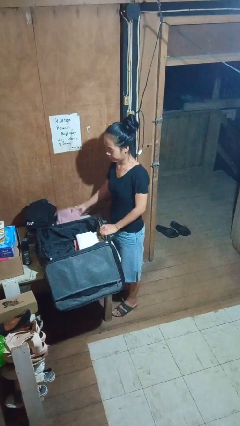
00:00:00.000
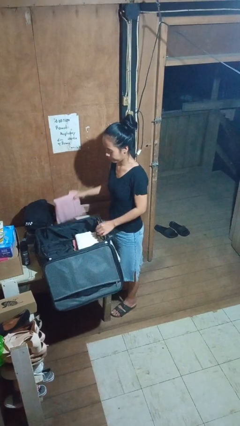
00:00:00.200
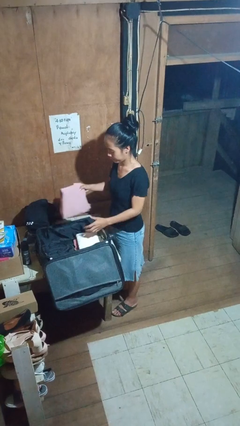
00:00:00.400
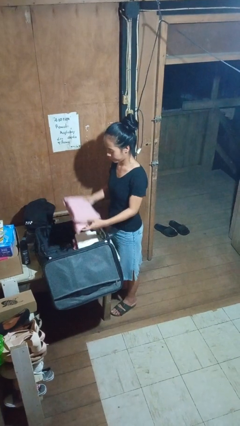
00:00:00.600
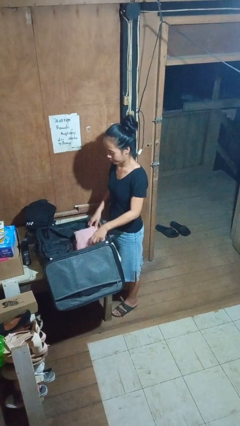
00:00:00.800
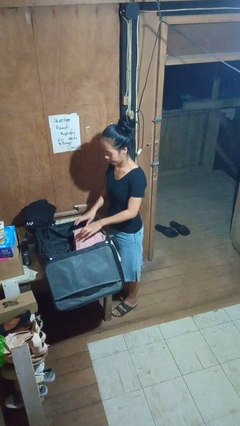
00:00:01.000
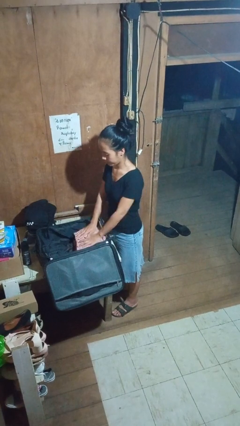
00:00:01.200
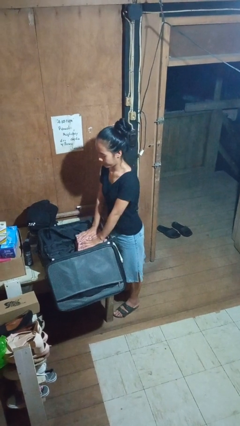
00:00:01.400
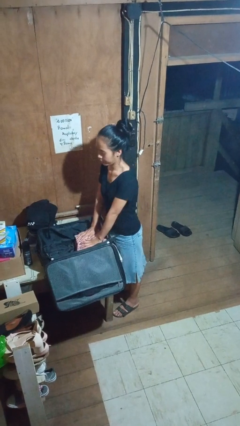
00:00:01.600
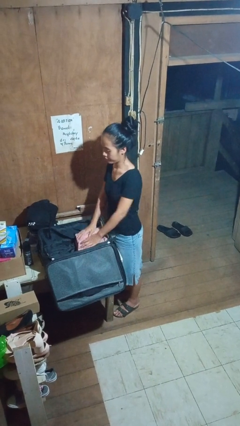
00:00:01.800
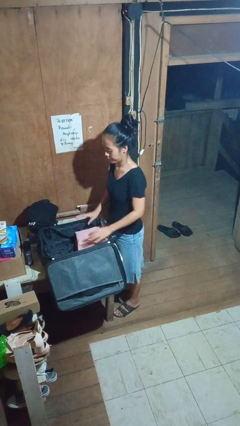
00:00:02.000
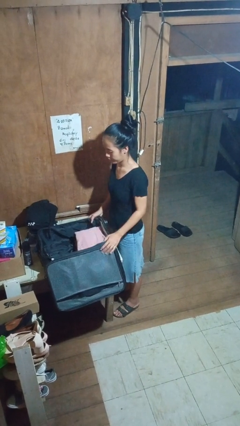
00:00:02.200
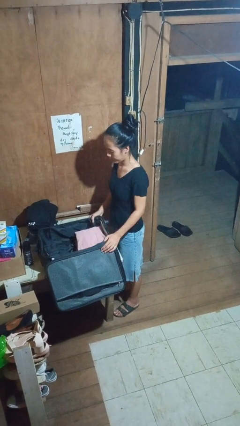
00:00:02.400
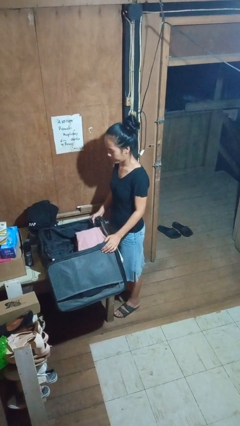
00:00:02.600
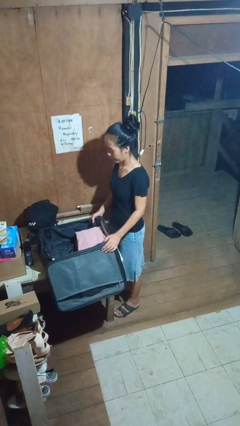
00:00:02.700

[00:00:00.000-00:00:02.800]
person loads clothes into suitcase

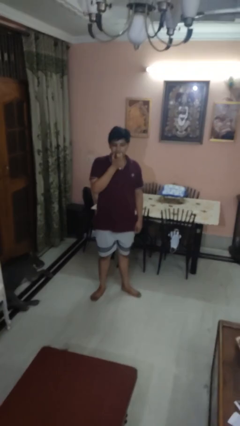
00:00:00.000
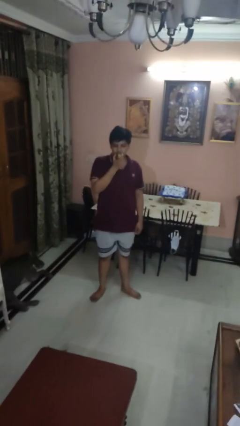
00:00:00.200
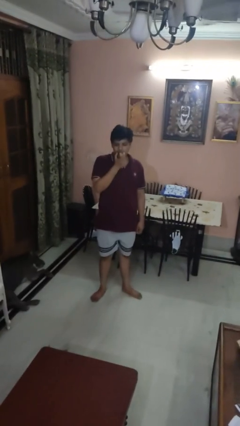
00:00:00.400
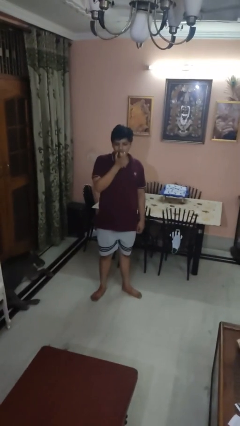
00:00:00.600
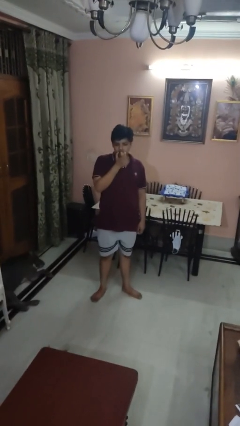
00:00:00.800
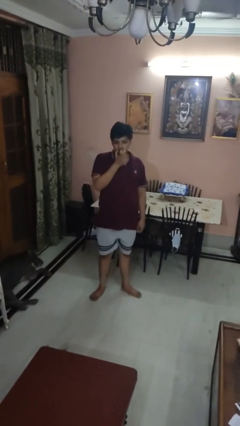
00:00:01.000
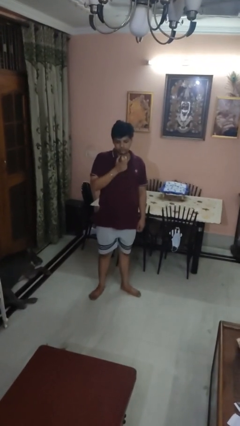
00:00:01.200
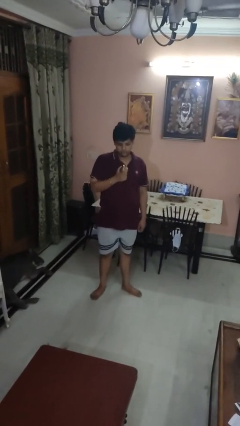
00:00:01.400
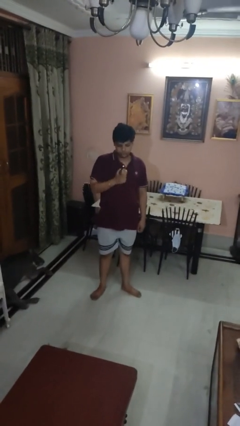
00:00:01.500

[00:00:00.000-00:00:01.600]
person eats apple

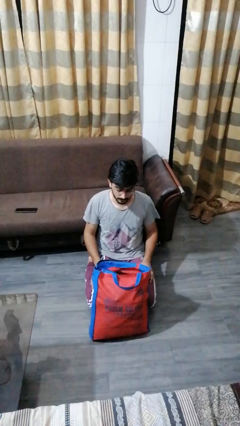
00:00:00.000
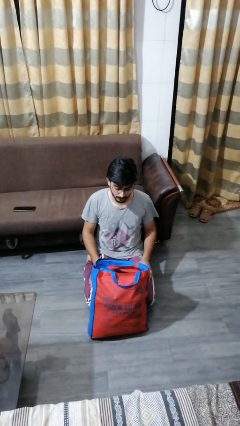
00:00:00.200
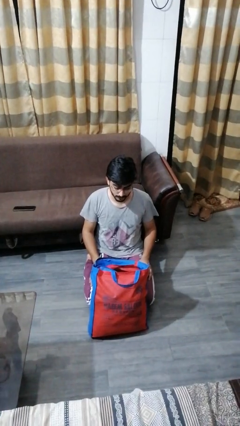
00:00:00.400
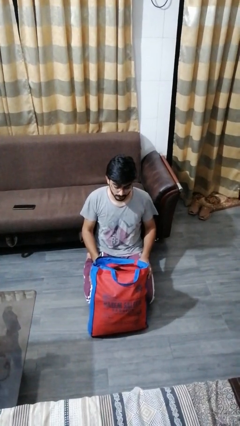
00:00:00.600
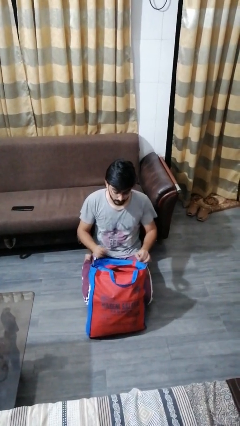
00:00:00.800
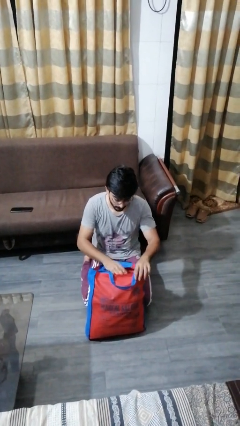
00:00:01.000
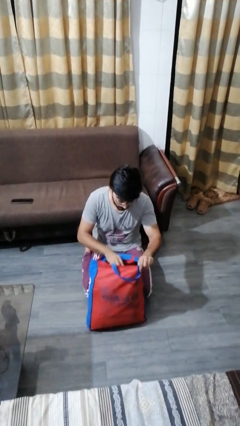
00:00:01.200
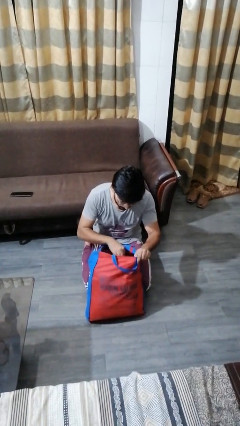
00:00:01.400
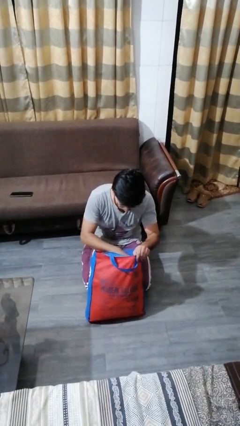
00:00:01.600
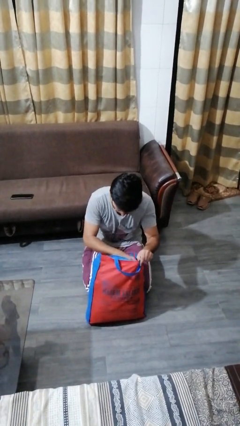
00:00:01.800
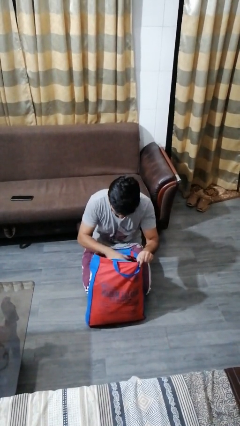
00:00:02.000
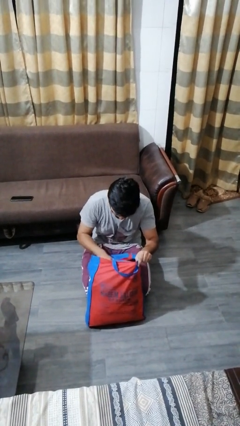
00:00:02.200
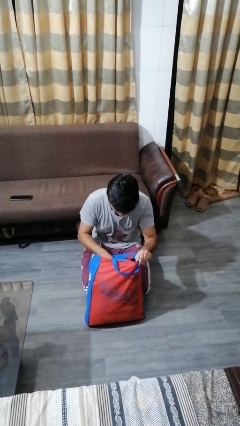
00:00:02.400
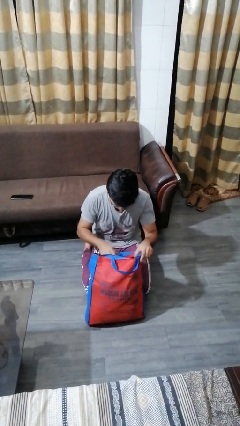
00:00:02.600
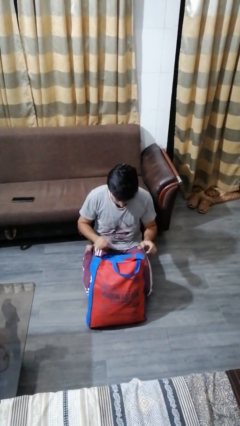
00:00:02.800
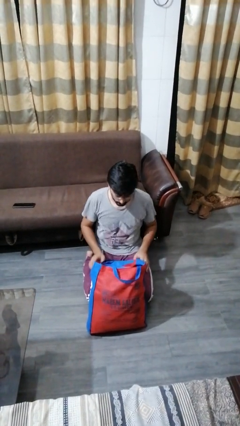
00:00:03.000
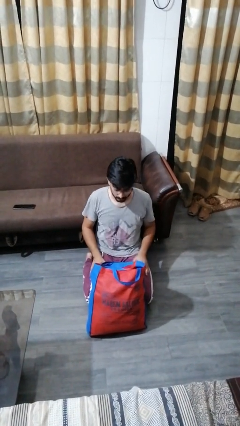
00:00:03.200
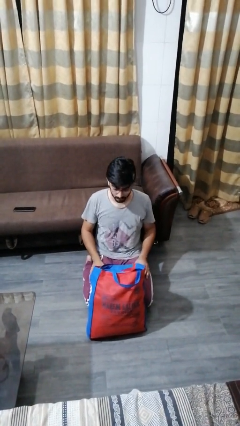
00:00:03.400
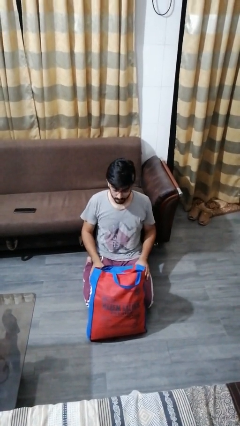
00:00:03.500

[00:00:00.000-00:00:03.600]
person searches in bag

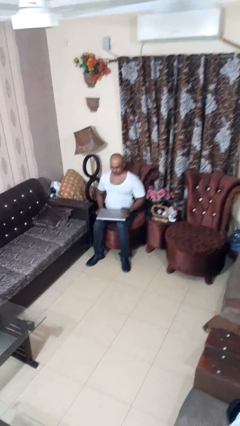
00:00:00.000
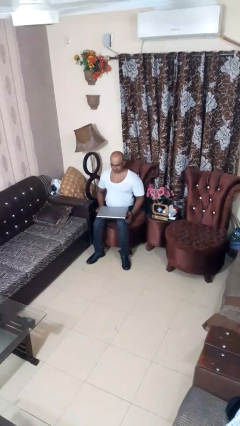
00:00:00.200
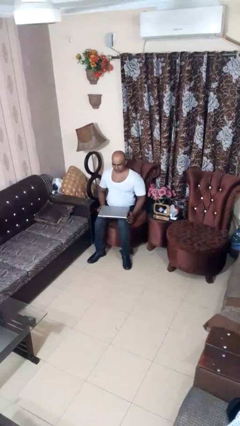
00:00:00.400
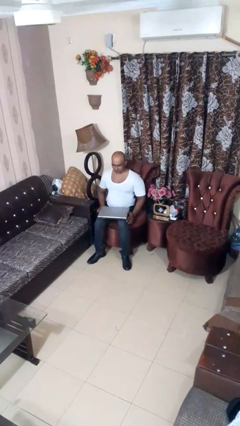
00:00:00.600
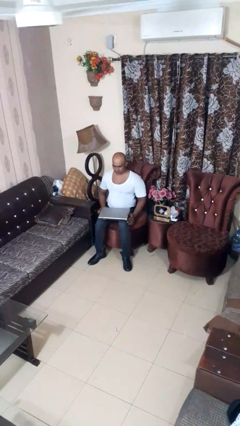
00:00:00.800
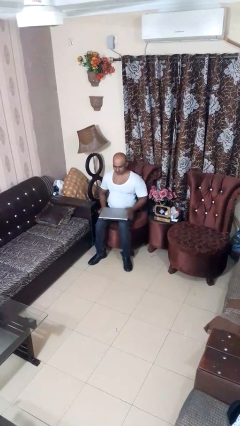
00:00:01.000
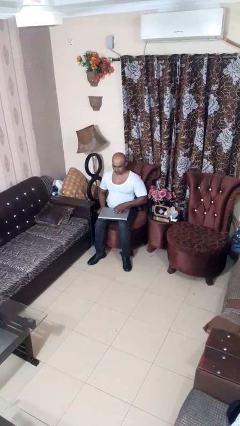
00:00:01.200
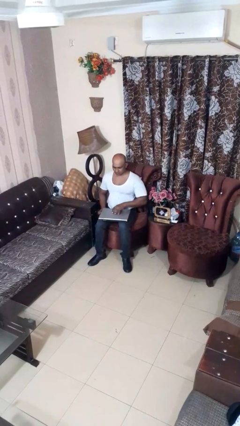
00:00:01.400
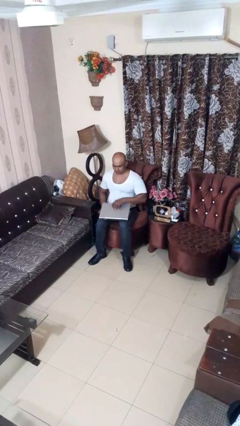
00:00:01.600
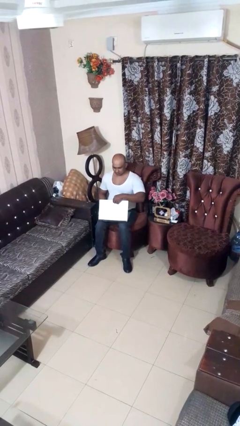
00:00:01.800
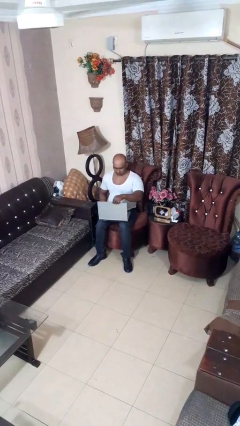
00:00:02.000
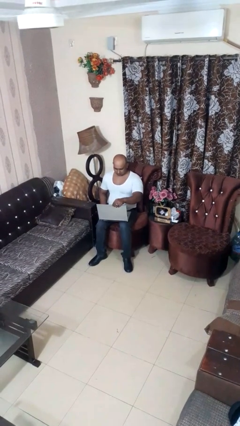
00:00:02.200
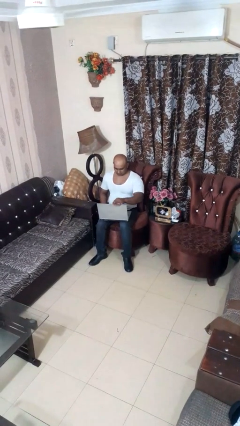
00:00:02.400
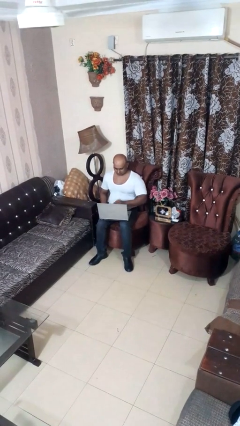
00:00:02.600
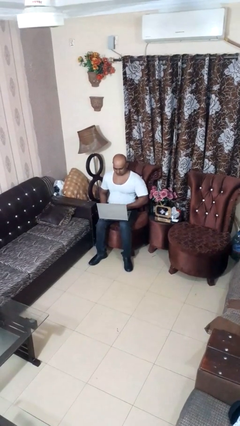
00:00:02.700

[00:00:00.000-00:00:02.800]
person opens laptop

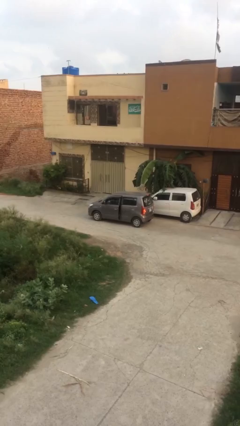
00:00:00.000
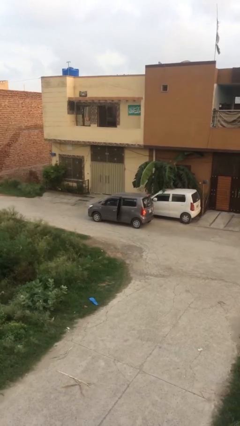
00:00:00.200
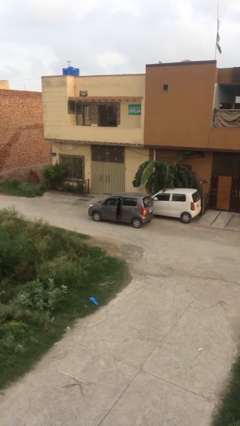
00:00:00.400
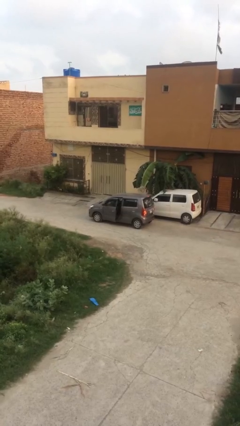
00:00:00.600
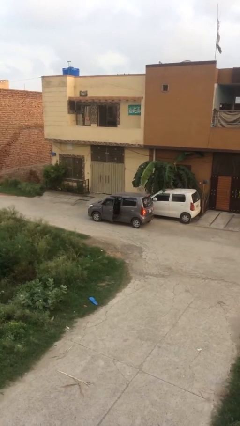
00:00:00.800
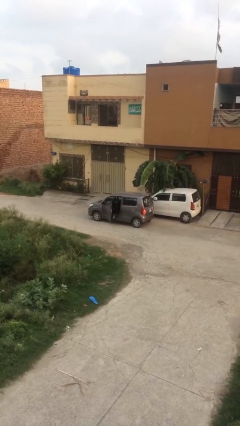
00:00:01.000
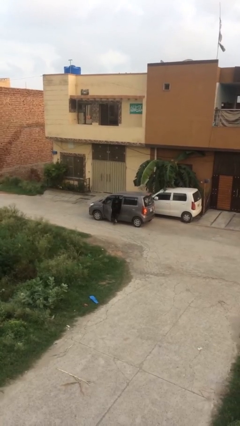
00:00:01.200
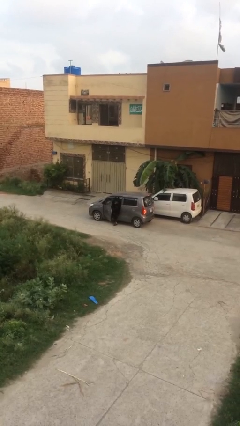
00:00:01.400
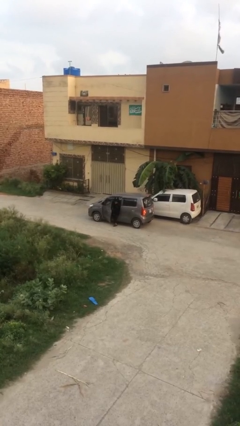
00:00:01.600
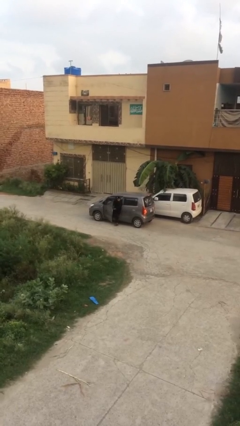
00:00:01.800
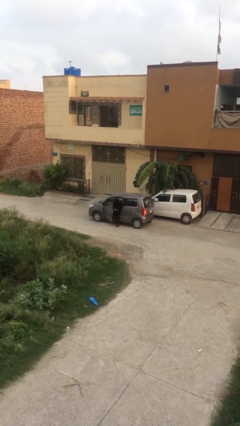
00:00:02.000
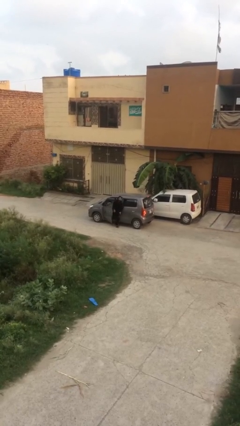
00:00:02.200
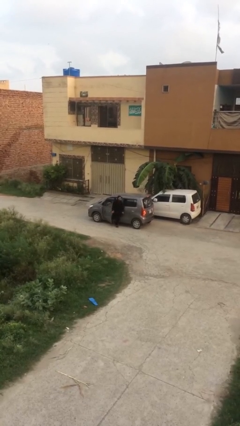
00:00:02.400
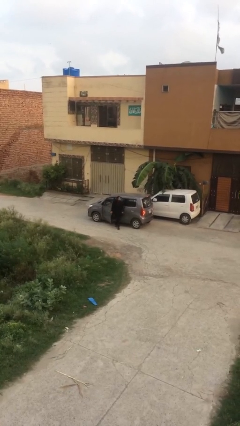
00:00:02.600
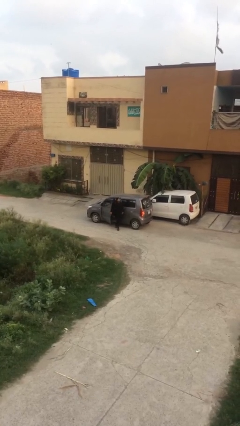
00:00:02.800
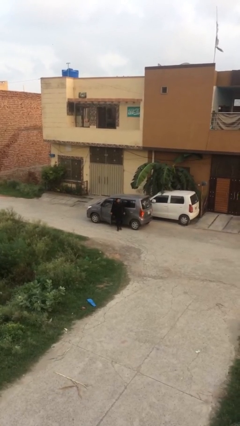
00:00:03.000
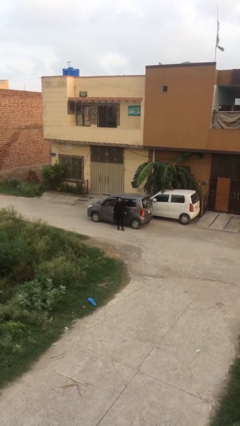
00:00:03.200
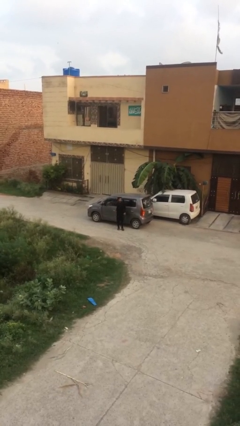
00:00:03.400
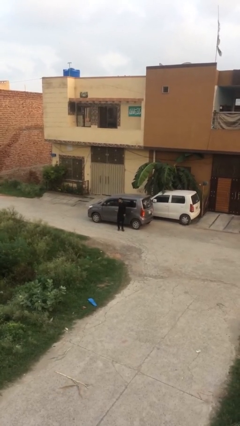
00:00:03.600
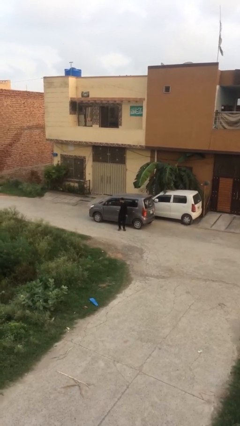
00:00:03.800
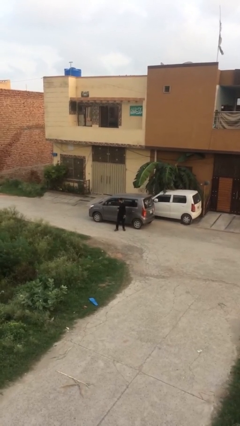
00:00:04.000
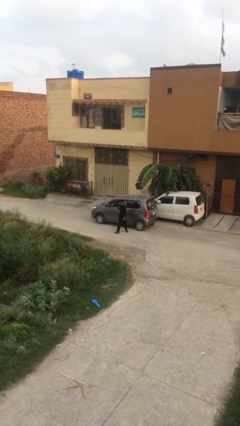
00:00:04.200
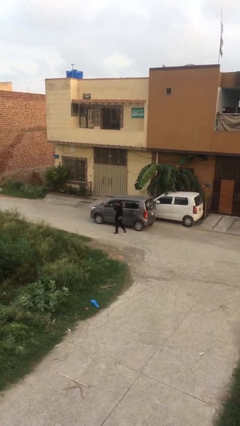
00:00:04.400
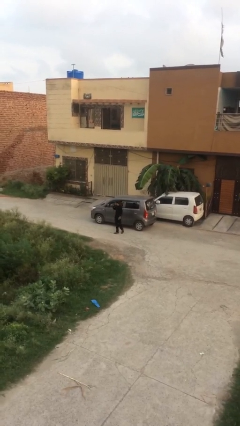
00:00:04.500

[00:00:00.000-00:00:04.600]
car drops off person

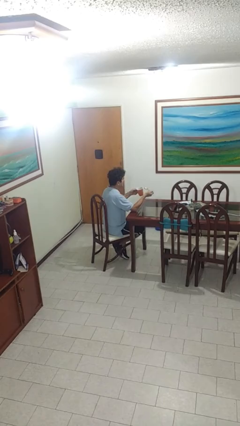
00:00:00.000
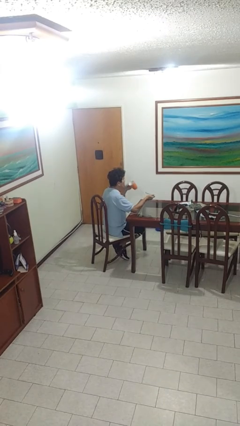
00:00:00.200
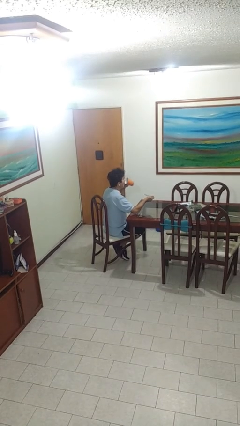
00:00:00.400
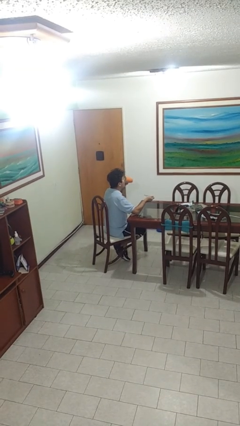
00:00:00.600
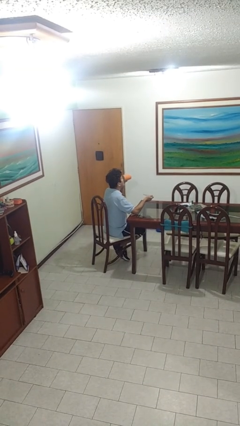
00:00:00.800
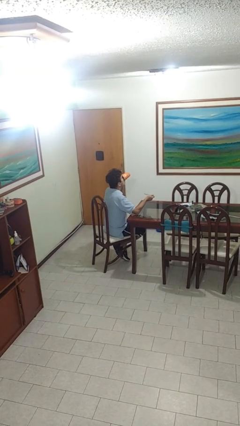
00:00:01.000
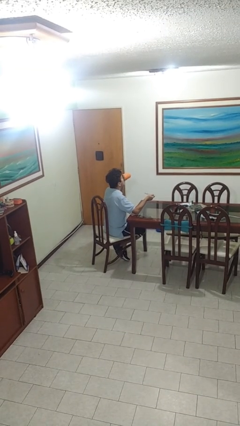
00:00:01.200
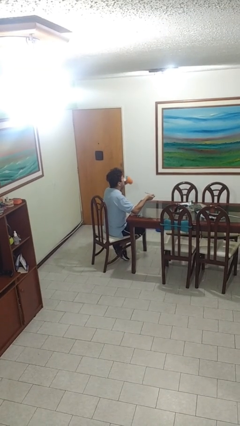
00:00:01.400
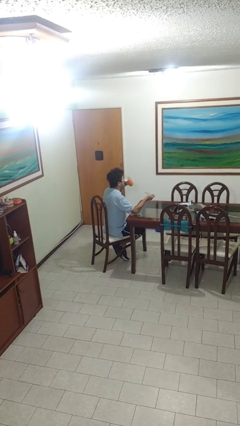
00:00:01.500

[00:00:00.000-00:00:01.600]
person drinks from mug

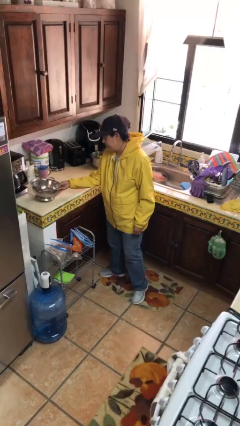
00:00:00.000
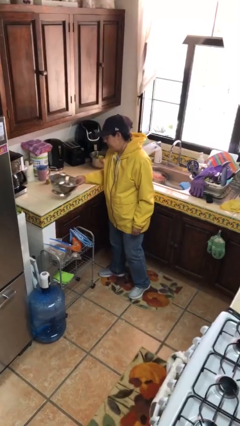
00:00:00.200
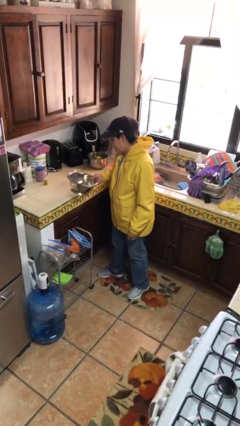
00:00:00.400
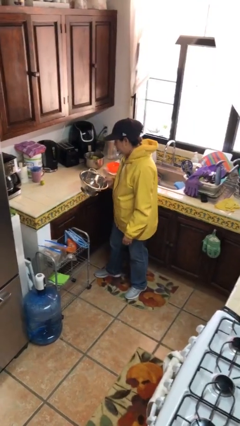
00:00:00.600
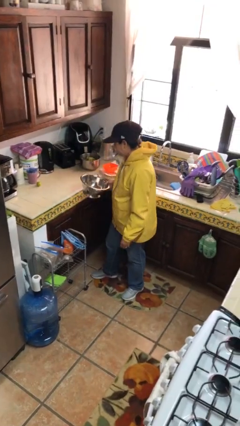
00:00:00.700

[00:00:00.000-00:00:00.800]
person picks up object from countertop
